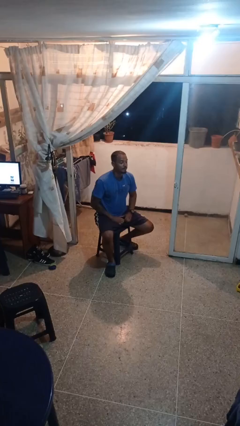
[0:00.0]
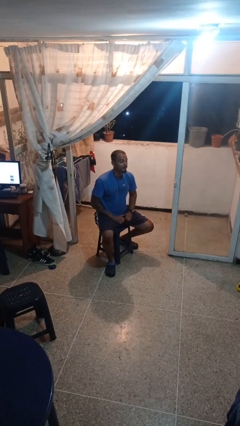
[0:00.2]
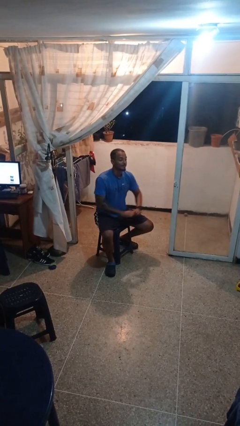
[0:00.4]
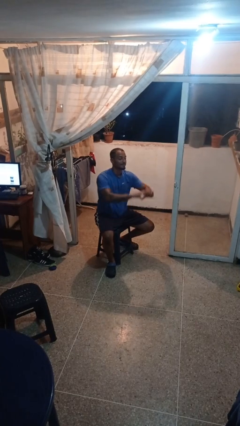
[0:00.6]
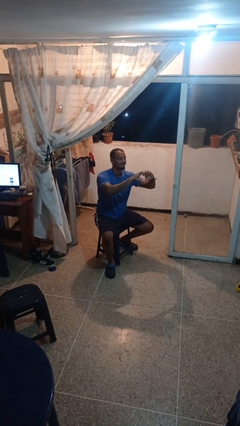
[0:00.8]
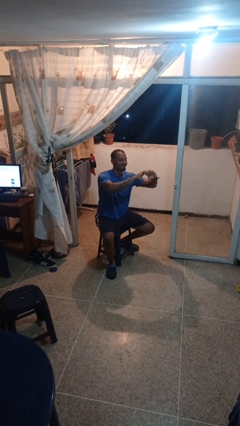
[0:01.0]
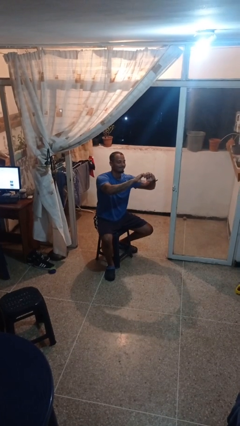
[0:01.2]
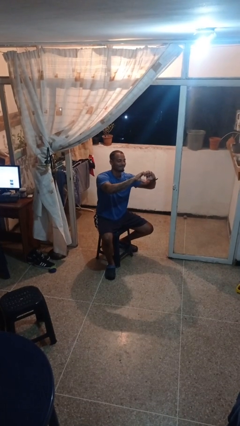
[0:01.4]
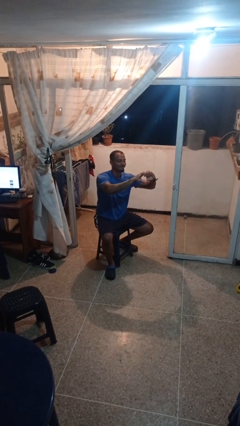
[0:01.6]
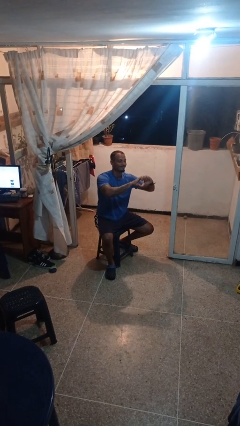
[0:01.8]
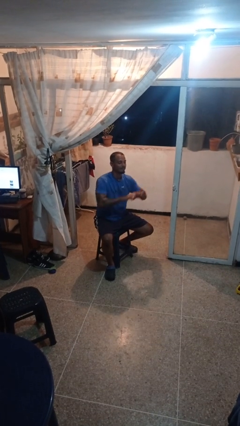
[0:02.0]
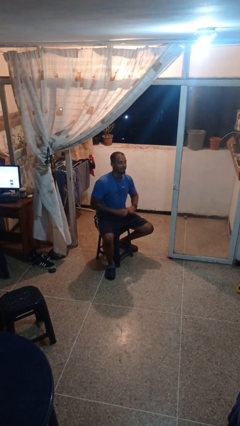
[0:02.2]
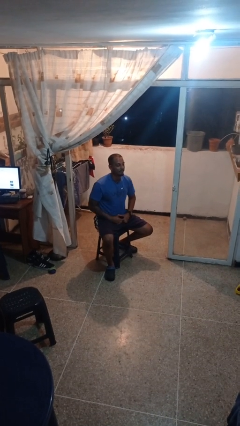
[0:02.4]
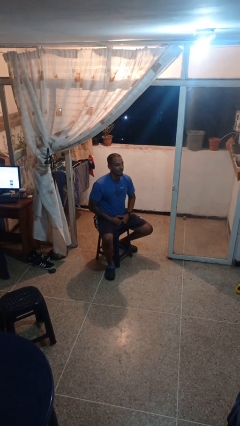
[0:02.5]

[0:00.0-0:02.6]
person gestures heart

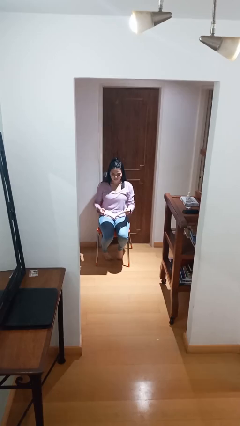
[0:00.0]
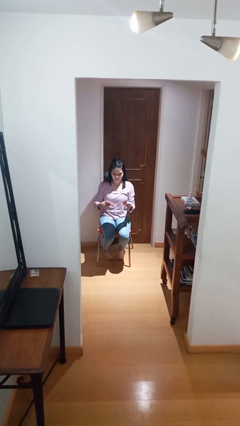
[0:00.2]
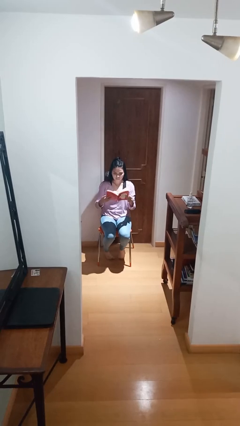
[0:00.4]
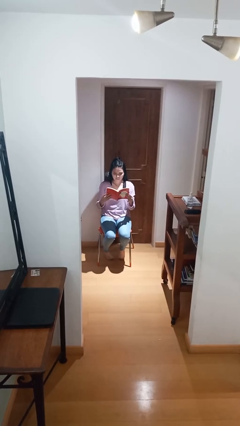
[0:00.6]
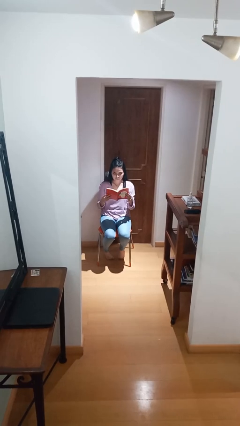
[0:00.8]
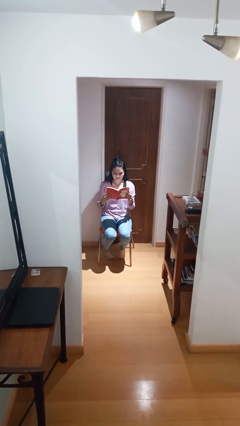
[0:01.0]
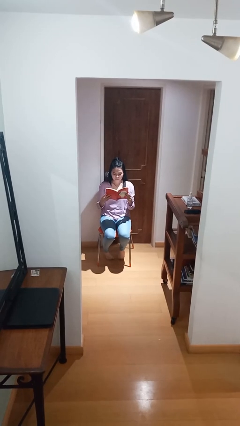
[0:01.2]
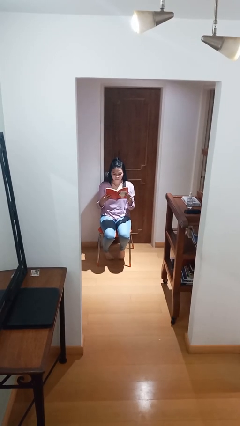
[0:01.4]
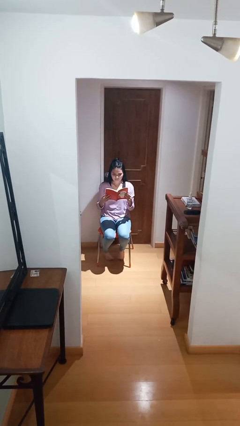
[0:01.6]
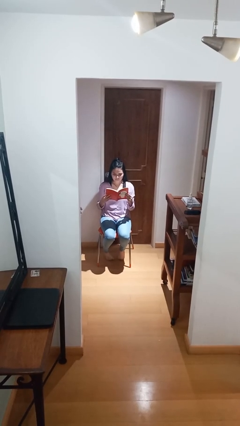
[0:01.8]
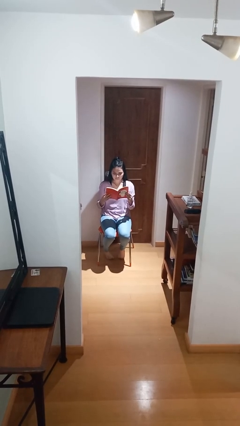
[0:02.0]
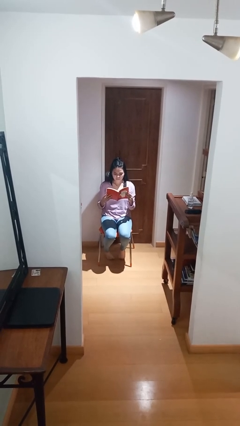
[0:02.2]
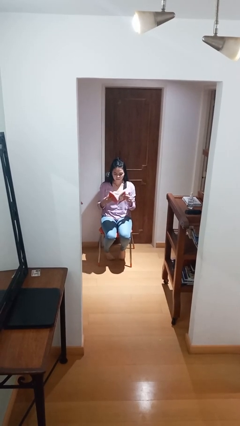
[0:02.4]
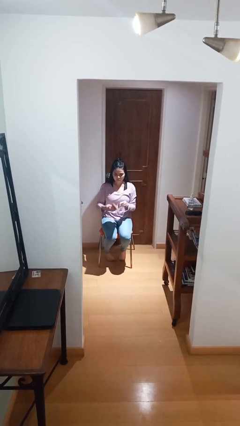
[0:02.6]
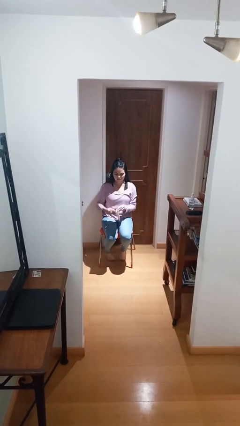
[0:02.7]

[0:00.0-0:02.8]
person reads document

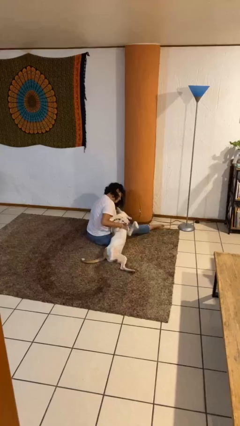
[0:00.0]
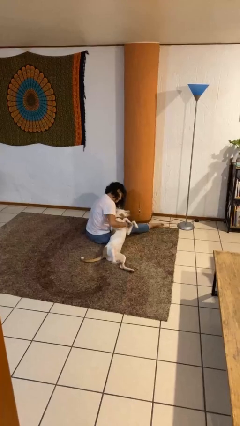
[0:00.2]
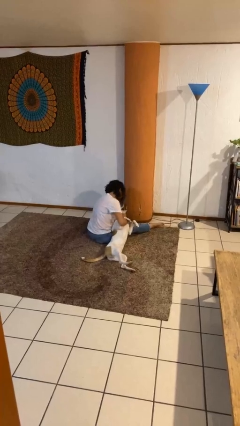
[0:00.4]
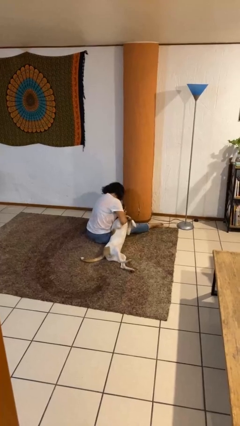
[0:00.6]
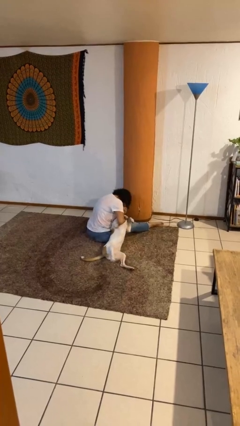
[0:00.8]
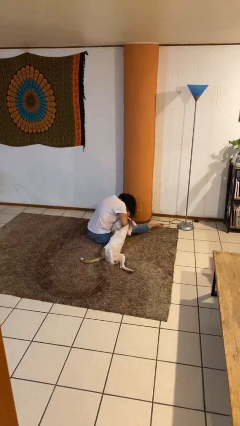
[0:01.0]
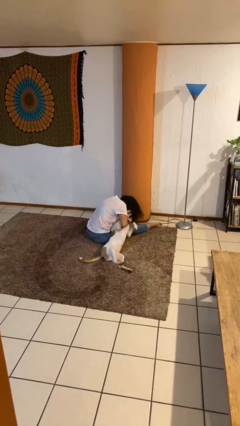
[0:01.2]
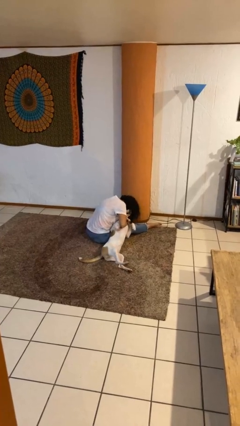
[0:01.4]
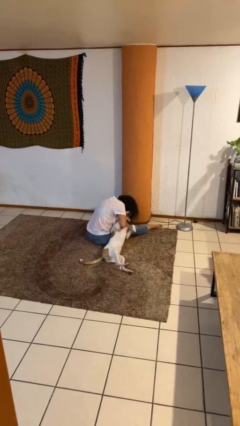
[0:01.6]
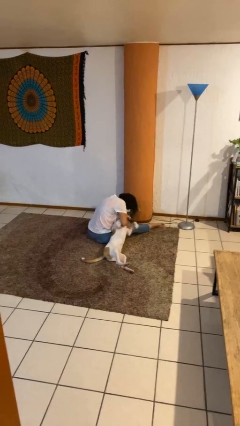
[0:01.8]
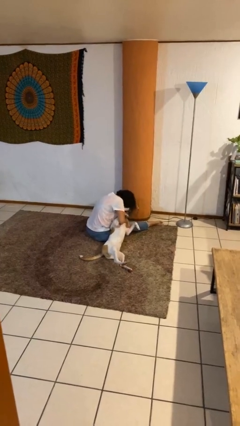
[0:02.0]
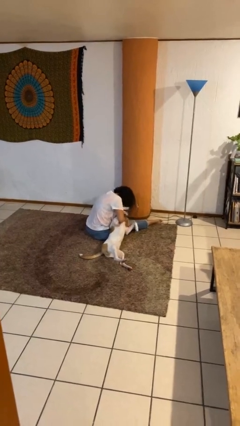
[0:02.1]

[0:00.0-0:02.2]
person hugs dog

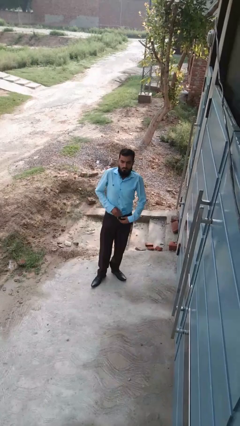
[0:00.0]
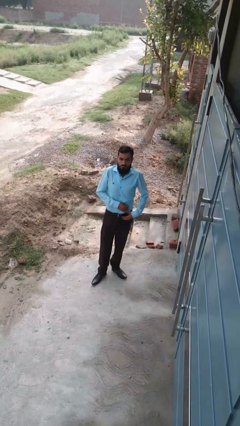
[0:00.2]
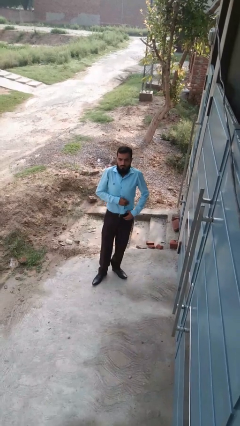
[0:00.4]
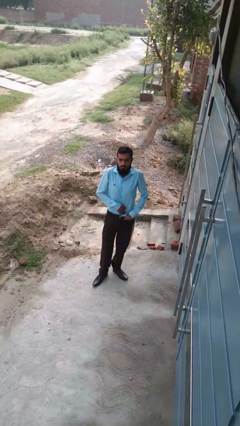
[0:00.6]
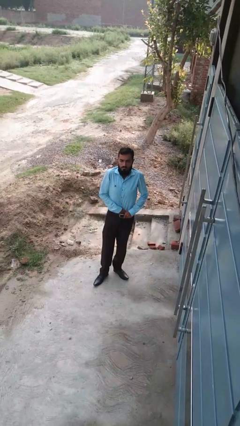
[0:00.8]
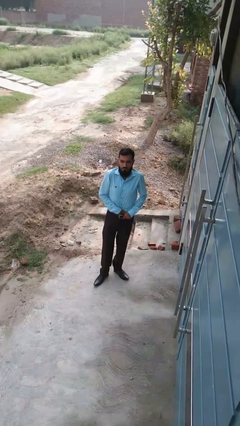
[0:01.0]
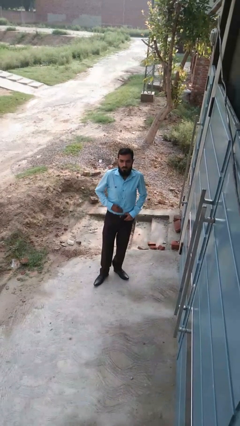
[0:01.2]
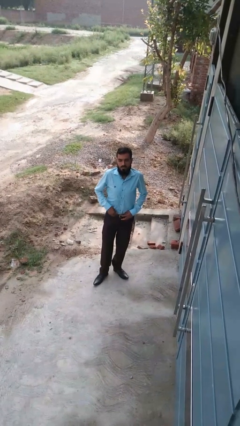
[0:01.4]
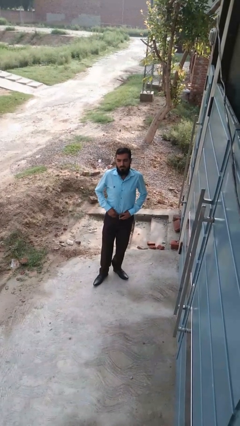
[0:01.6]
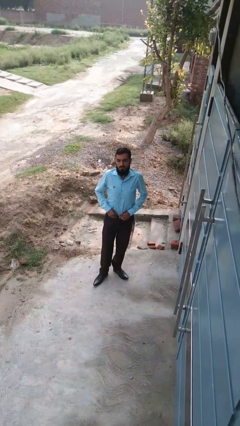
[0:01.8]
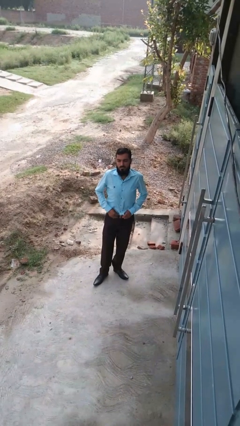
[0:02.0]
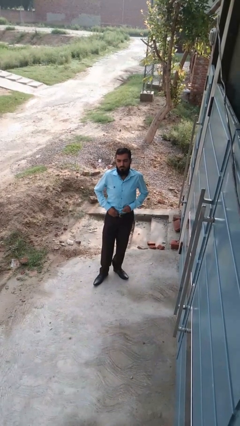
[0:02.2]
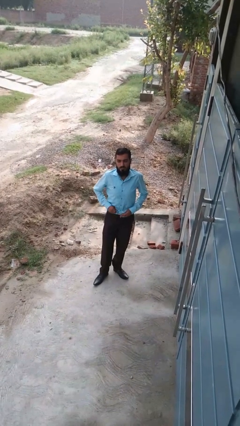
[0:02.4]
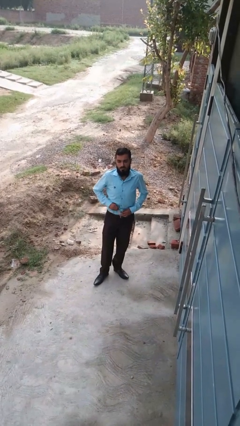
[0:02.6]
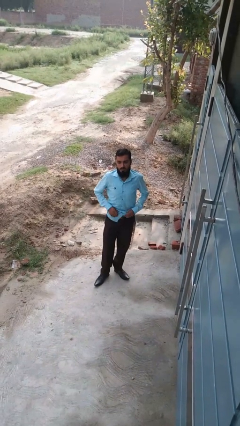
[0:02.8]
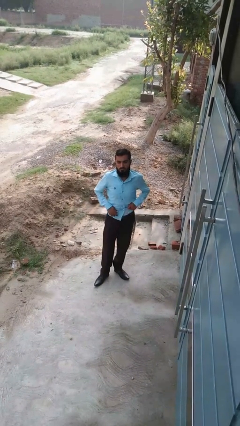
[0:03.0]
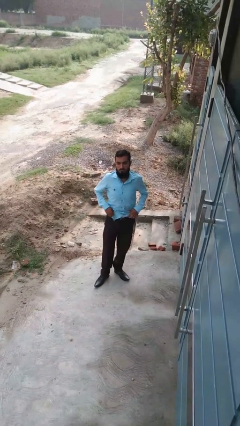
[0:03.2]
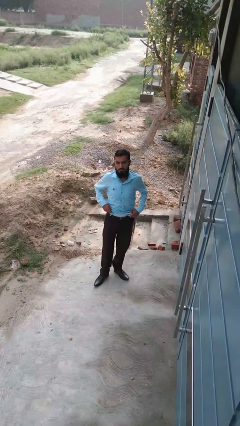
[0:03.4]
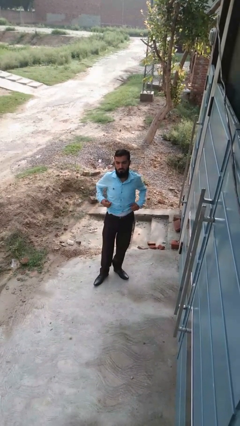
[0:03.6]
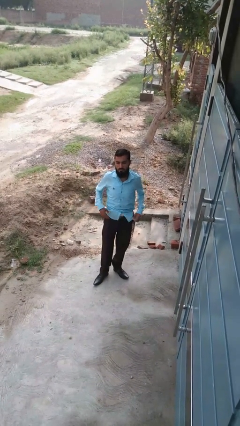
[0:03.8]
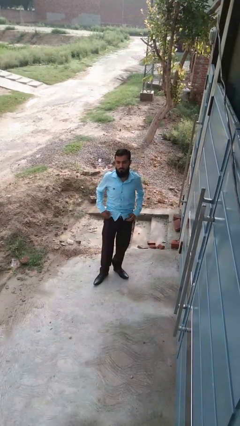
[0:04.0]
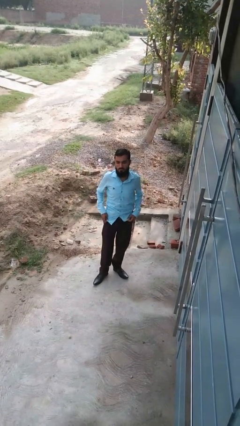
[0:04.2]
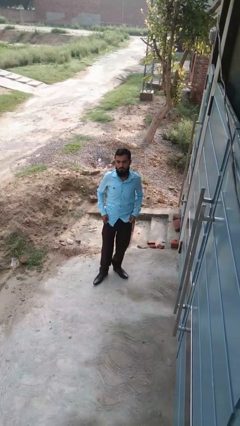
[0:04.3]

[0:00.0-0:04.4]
person untucks shirt

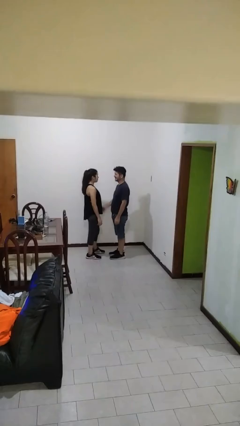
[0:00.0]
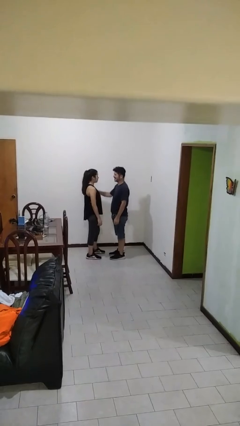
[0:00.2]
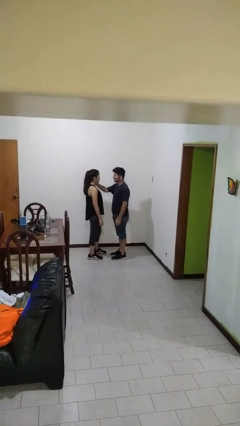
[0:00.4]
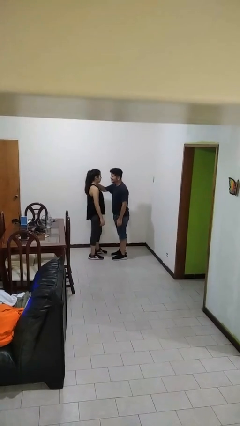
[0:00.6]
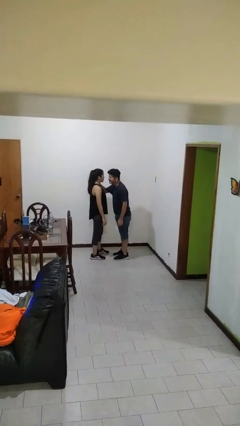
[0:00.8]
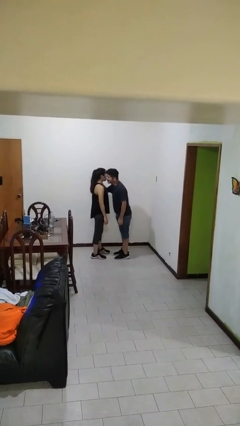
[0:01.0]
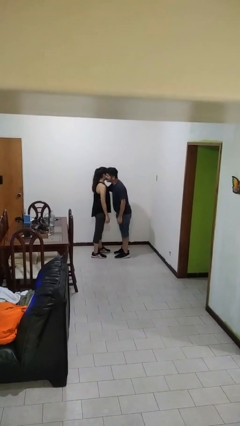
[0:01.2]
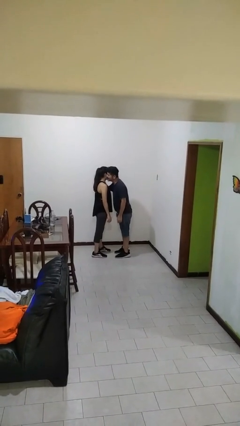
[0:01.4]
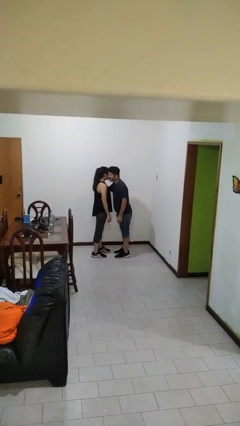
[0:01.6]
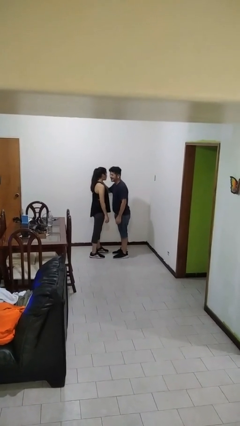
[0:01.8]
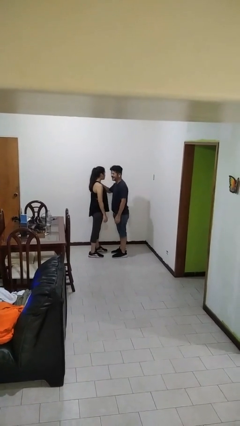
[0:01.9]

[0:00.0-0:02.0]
person kisses cheek of person

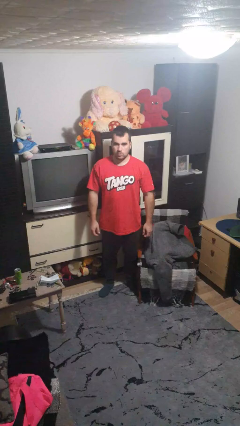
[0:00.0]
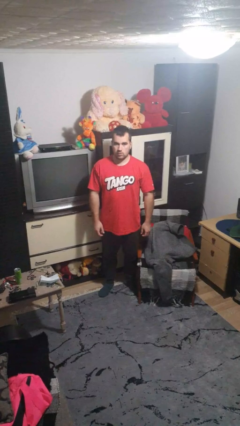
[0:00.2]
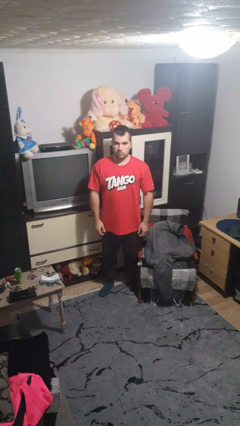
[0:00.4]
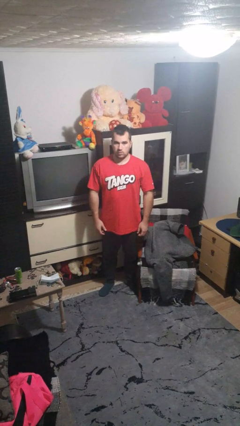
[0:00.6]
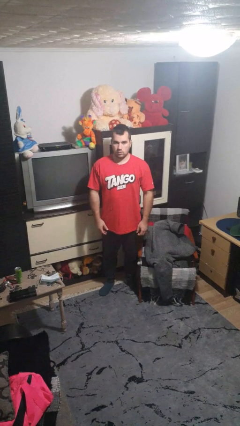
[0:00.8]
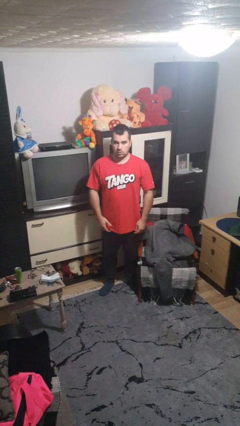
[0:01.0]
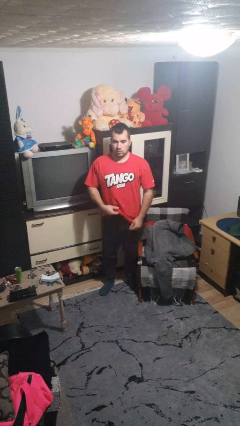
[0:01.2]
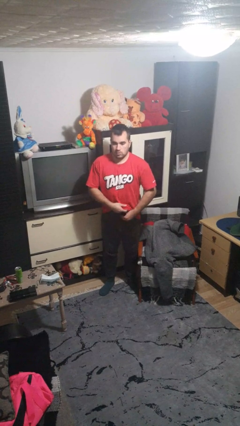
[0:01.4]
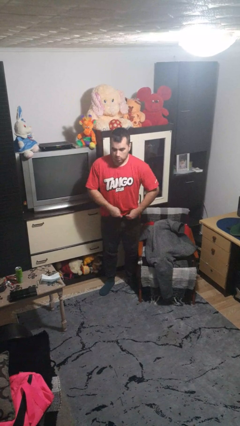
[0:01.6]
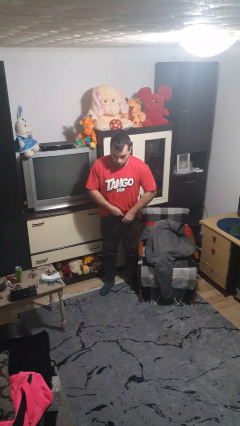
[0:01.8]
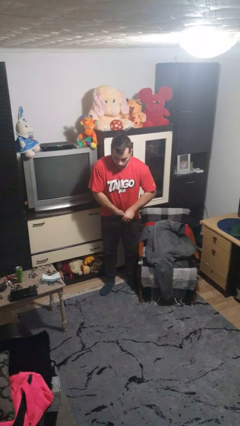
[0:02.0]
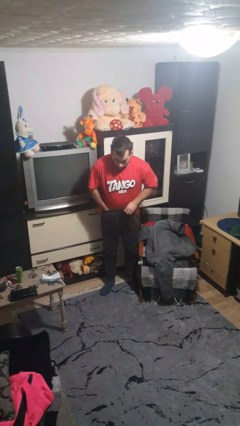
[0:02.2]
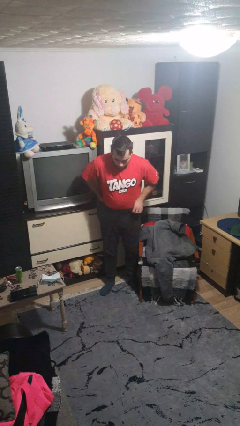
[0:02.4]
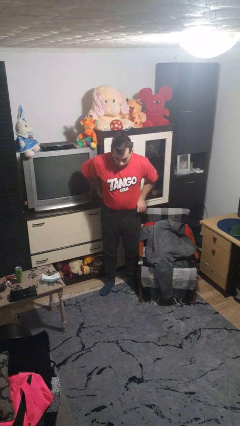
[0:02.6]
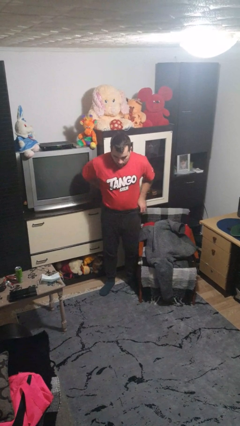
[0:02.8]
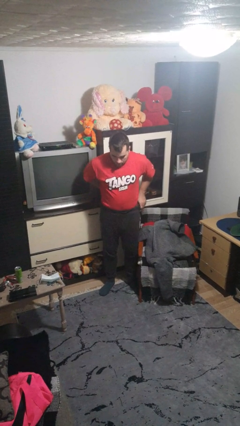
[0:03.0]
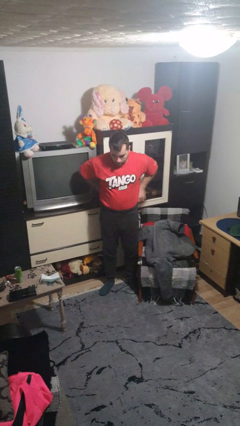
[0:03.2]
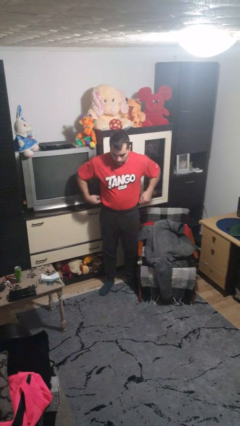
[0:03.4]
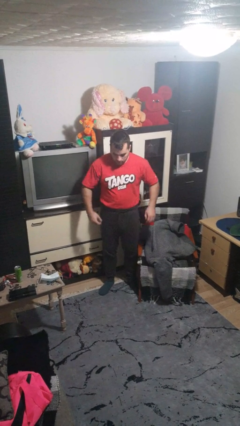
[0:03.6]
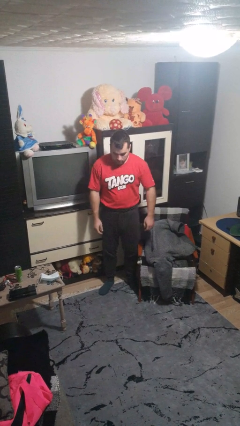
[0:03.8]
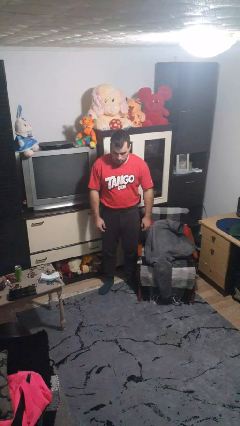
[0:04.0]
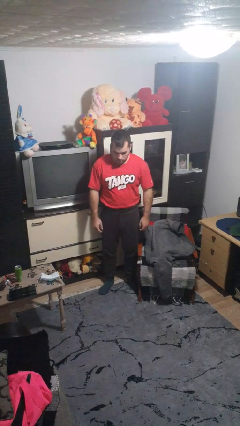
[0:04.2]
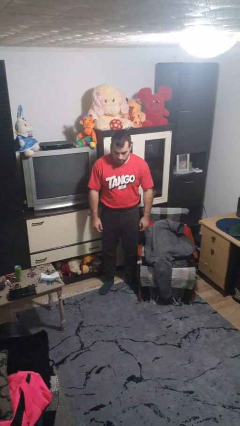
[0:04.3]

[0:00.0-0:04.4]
person tucks in shirt
